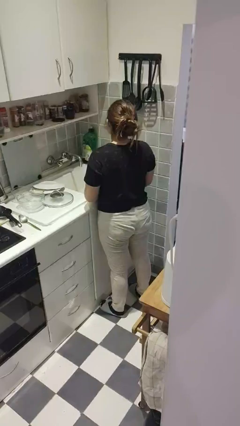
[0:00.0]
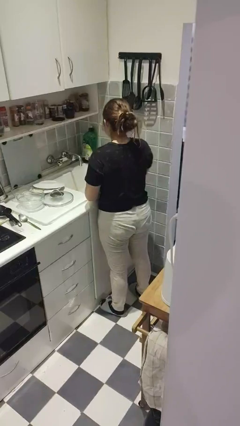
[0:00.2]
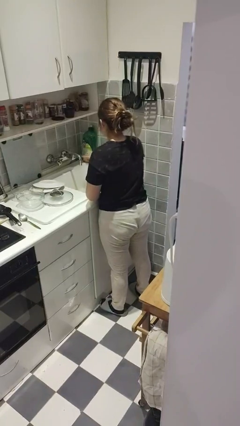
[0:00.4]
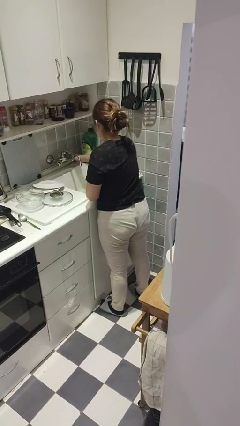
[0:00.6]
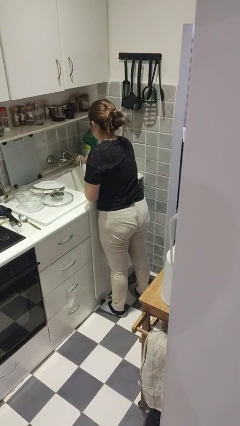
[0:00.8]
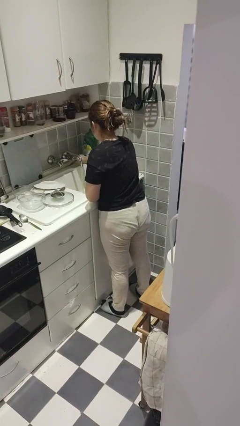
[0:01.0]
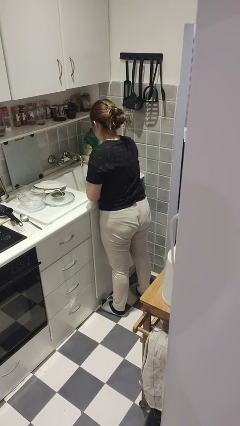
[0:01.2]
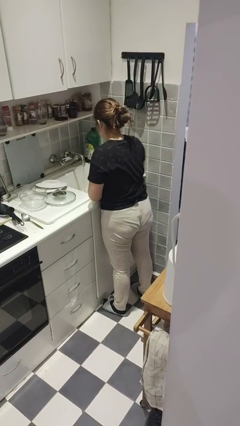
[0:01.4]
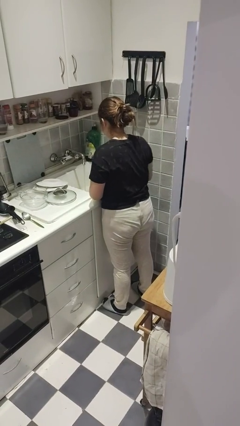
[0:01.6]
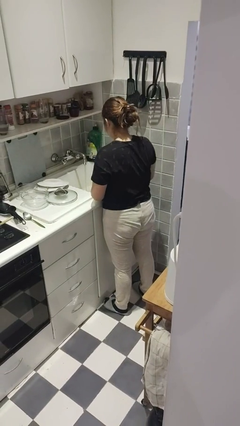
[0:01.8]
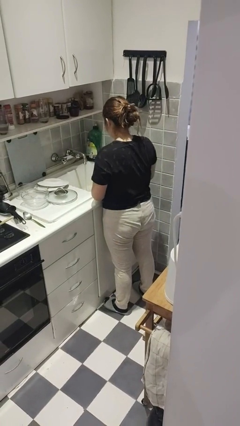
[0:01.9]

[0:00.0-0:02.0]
person turns on faucet

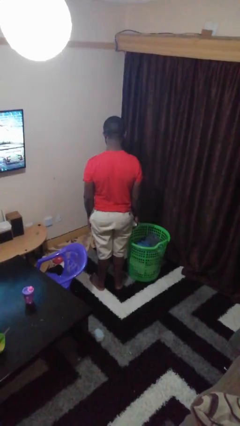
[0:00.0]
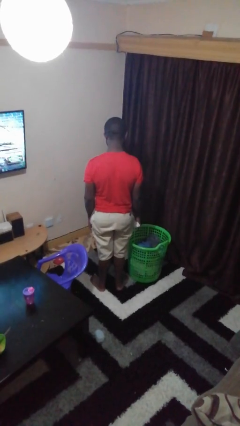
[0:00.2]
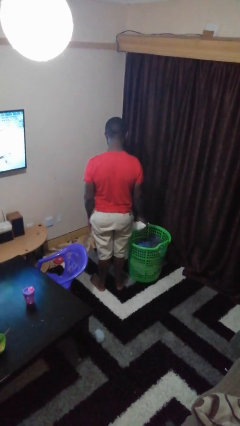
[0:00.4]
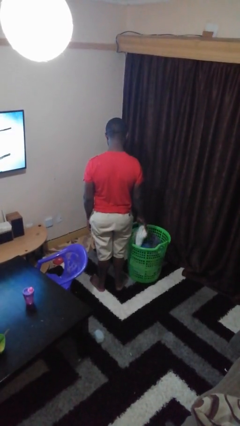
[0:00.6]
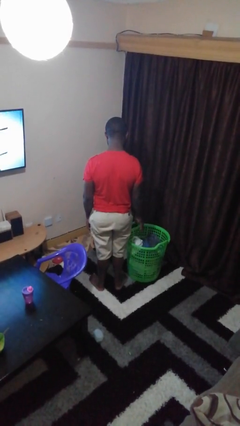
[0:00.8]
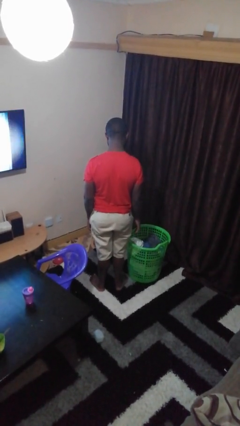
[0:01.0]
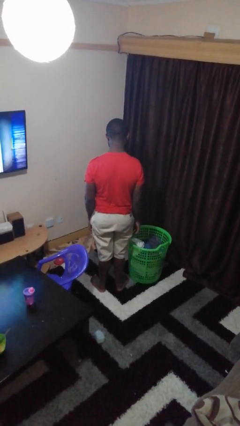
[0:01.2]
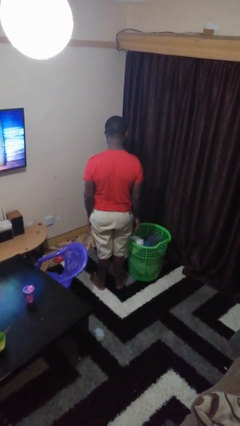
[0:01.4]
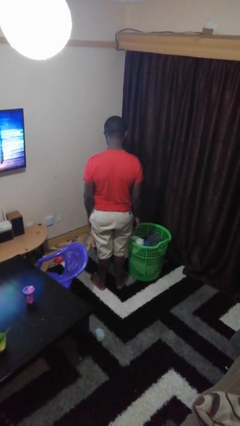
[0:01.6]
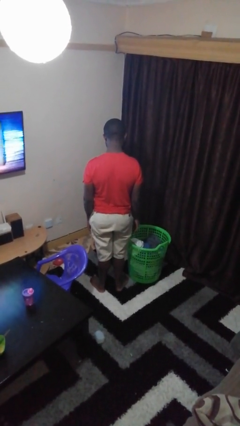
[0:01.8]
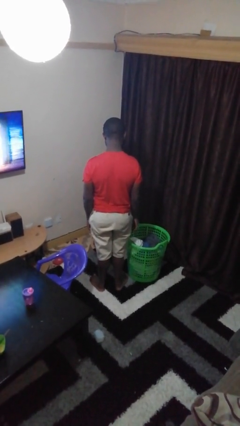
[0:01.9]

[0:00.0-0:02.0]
person puts object into basket

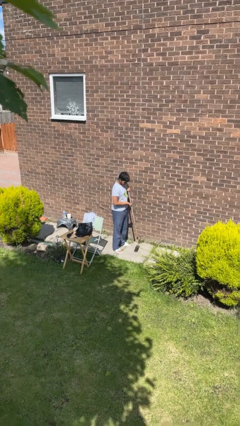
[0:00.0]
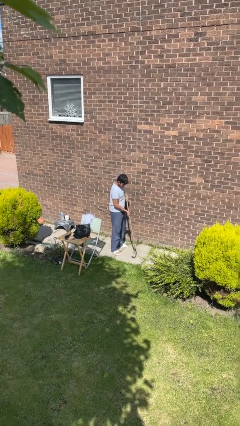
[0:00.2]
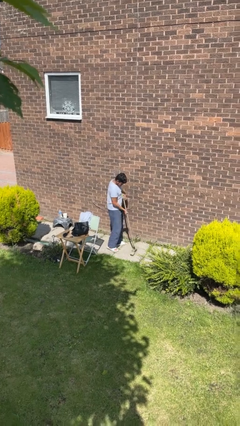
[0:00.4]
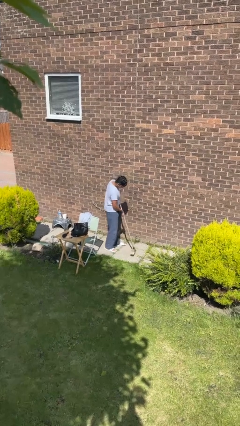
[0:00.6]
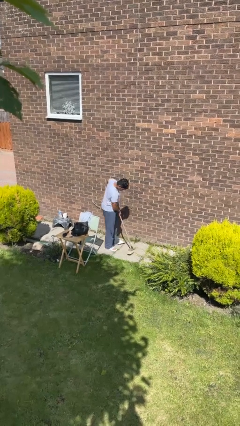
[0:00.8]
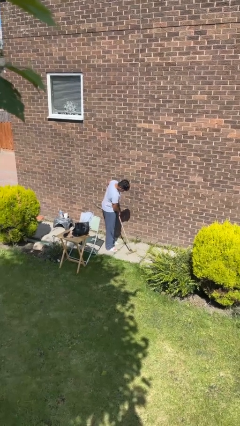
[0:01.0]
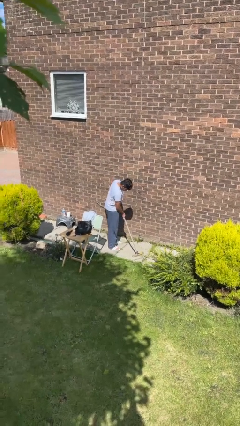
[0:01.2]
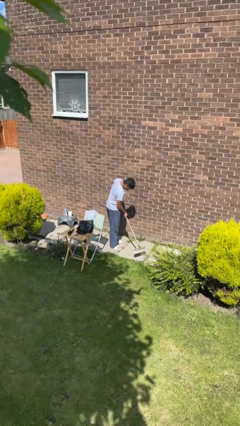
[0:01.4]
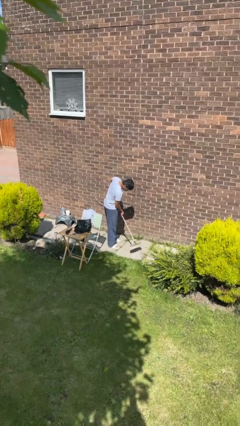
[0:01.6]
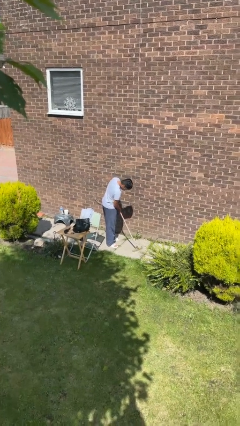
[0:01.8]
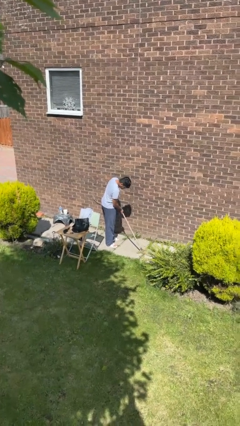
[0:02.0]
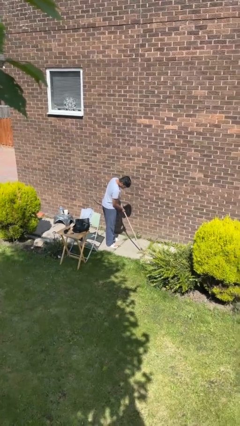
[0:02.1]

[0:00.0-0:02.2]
person sweeps floor

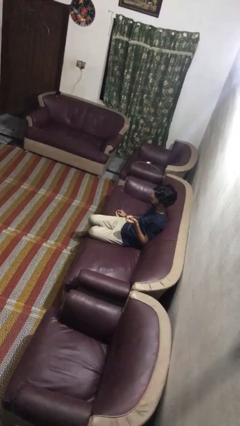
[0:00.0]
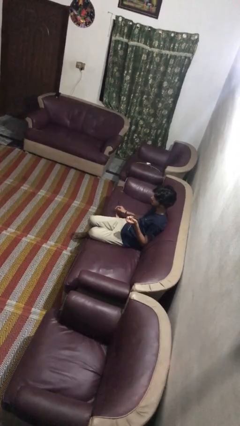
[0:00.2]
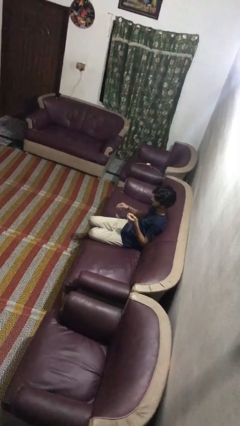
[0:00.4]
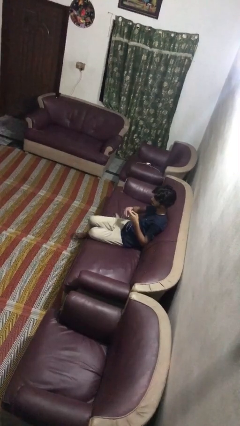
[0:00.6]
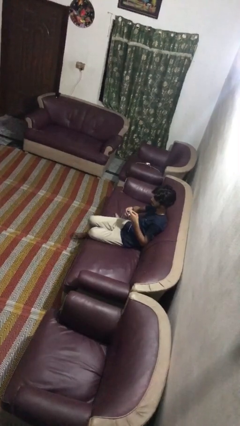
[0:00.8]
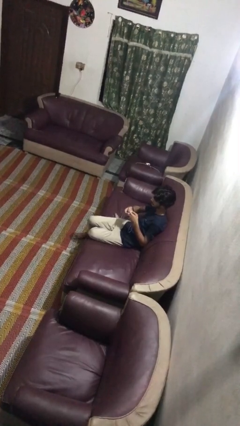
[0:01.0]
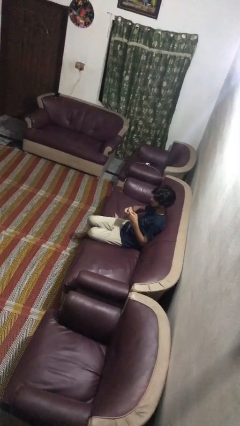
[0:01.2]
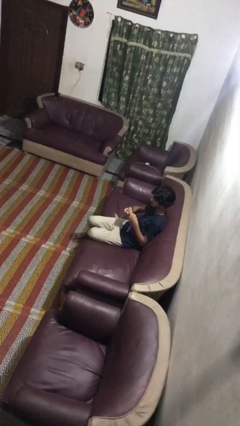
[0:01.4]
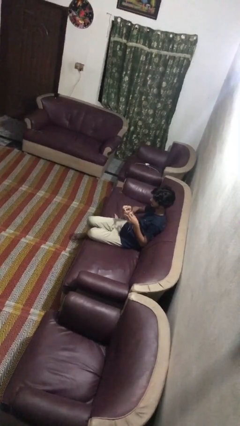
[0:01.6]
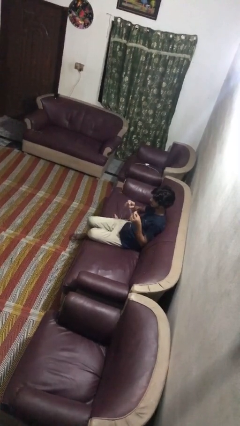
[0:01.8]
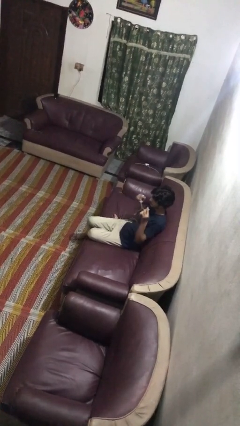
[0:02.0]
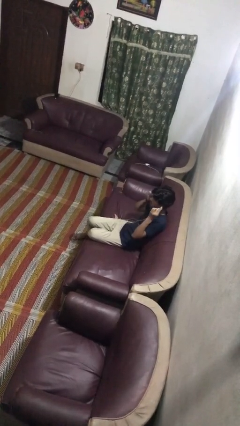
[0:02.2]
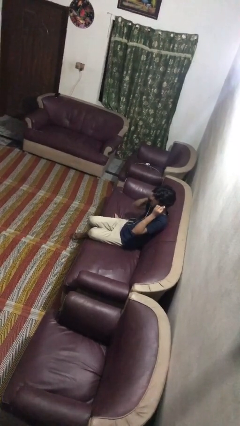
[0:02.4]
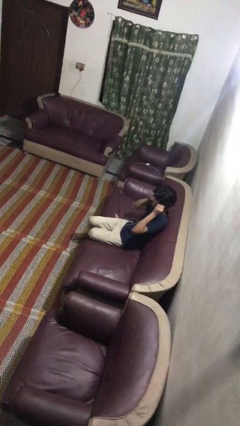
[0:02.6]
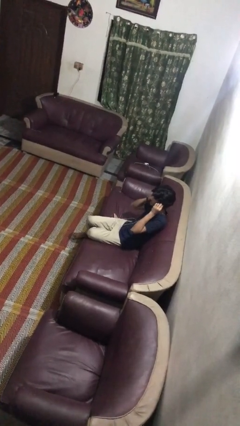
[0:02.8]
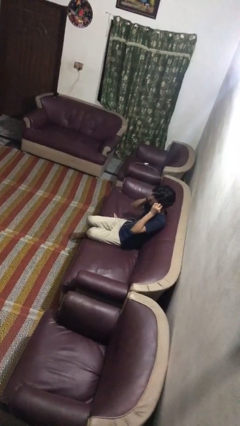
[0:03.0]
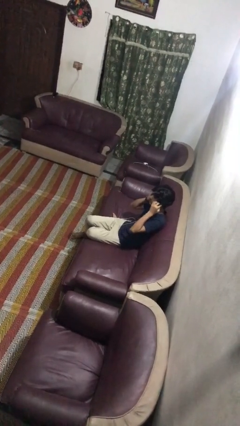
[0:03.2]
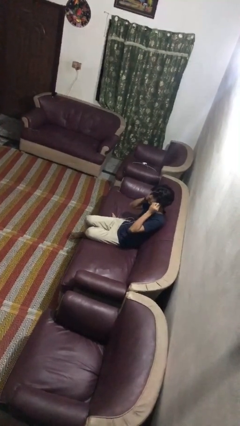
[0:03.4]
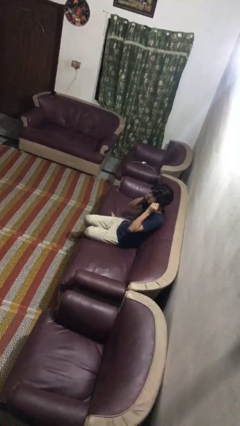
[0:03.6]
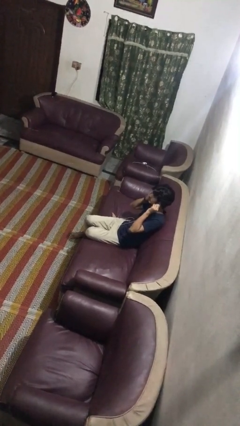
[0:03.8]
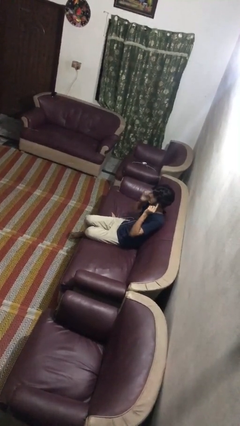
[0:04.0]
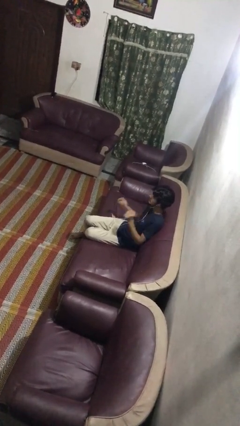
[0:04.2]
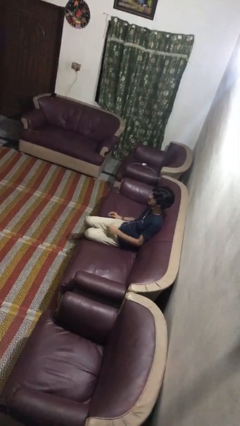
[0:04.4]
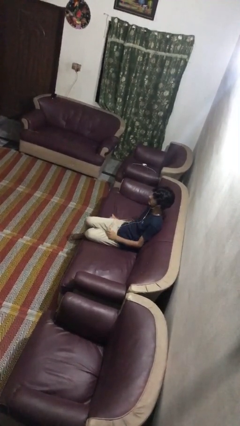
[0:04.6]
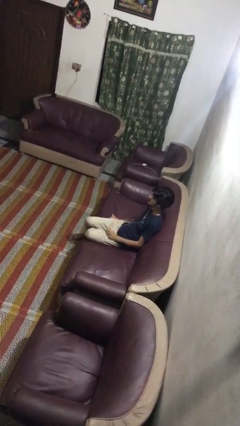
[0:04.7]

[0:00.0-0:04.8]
person puts on headphones

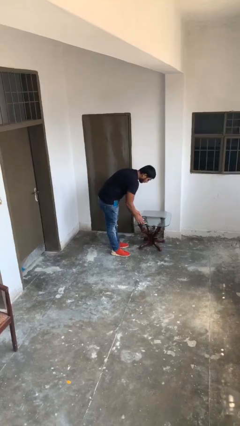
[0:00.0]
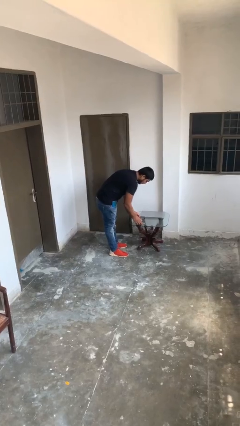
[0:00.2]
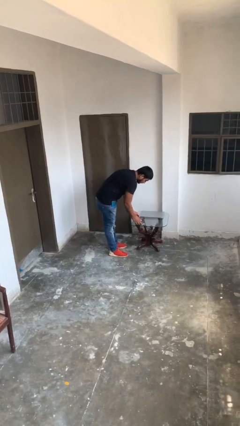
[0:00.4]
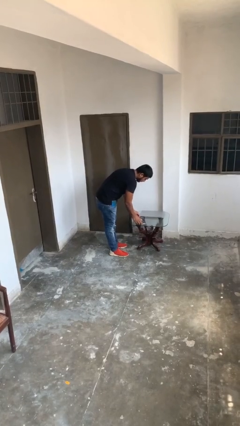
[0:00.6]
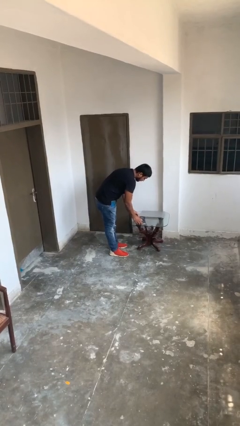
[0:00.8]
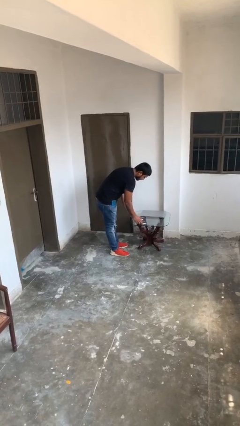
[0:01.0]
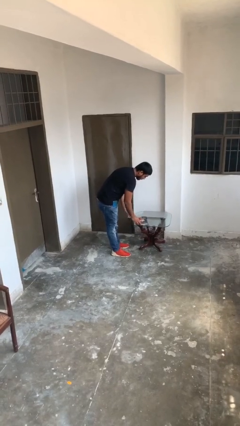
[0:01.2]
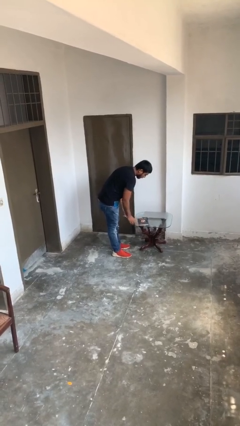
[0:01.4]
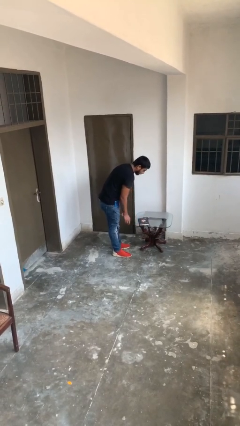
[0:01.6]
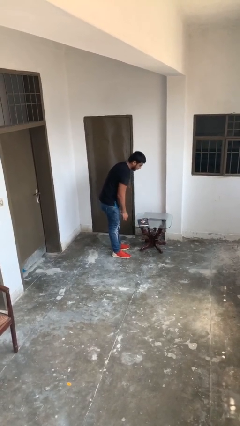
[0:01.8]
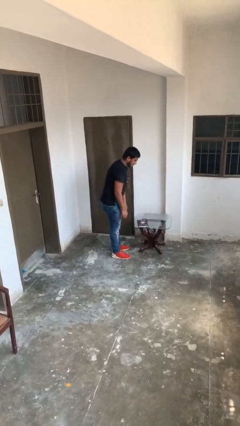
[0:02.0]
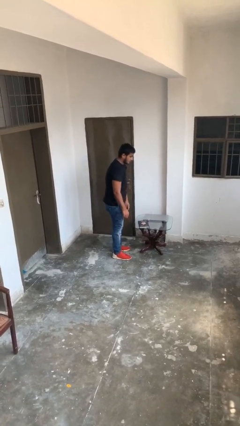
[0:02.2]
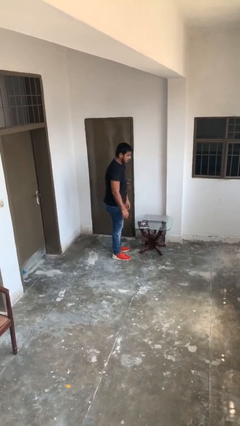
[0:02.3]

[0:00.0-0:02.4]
person puts down object on table

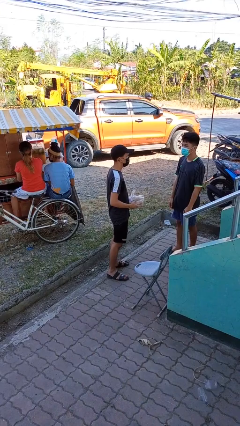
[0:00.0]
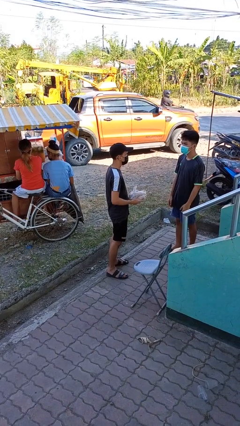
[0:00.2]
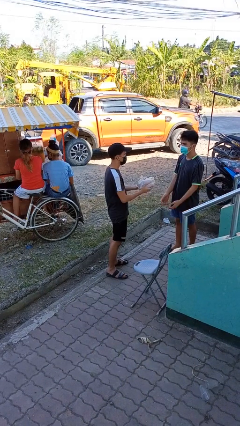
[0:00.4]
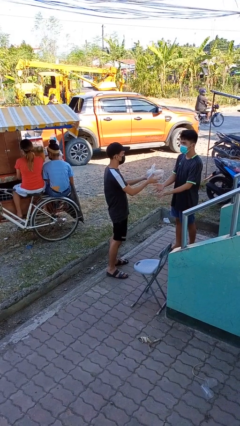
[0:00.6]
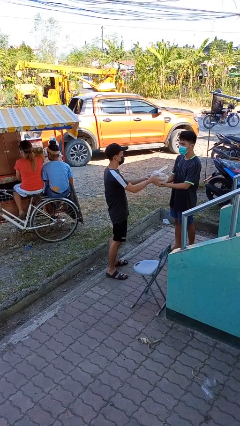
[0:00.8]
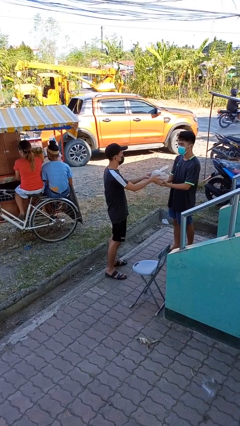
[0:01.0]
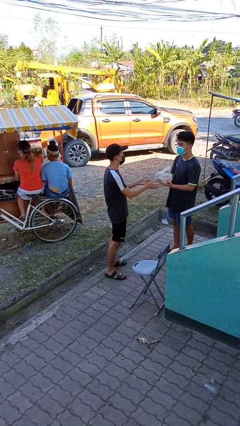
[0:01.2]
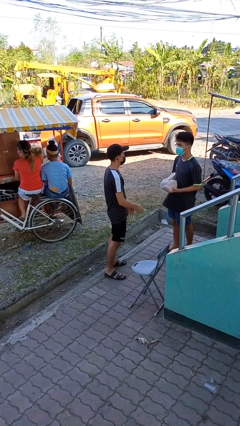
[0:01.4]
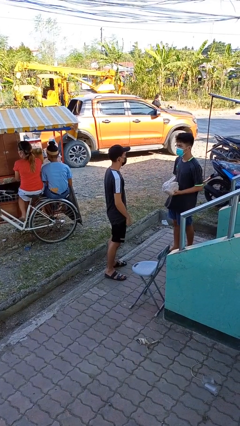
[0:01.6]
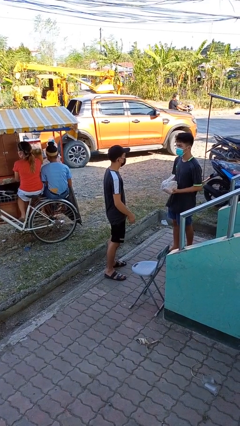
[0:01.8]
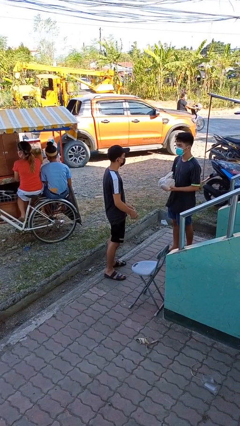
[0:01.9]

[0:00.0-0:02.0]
person transfers object to person

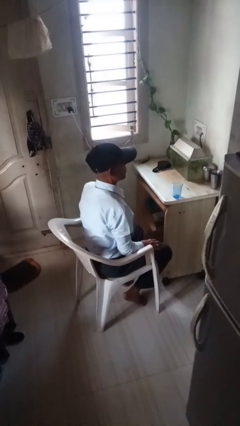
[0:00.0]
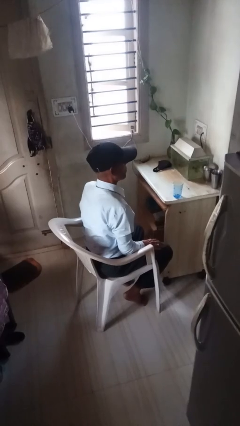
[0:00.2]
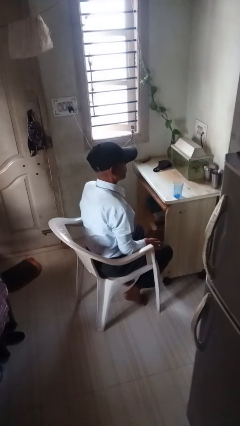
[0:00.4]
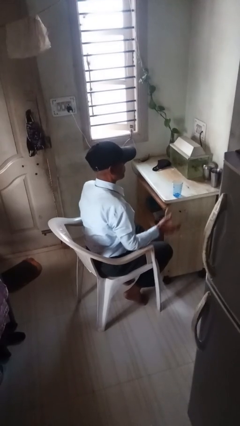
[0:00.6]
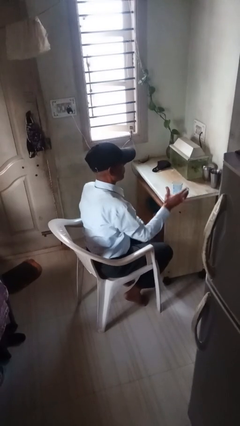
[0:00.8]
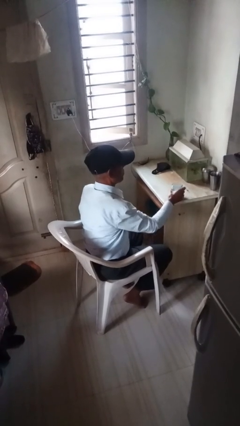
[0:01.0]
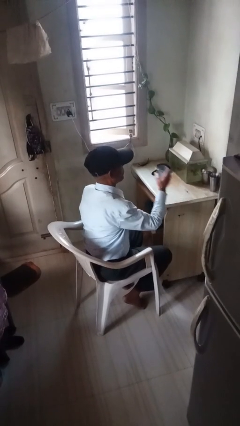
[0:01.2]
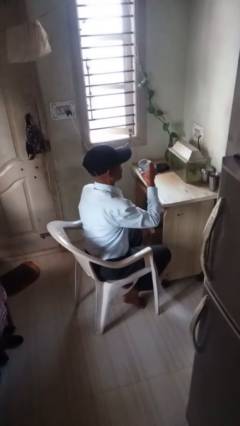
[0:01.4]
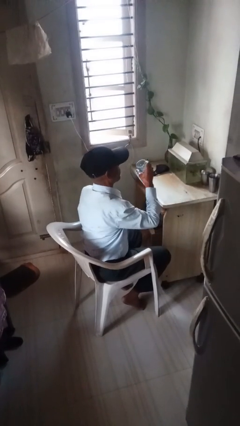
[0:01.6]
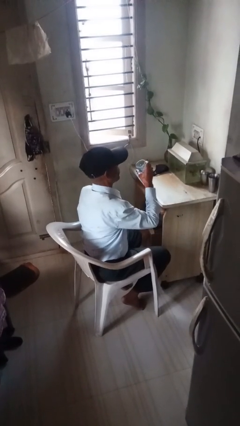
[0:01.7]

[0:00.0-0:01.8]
person picks up object from table

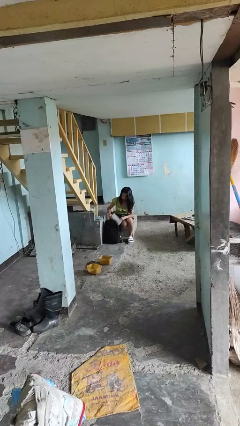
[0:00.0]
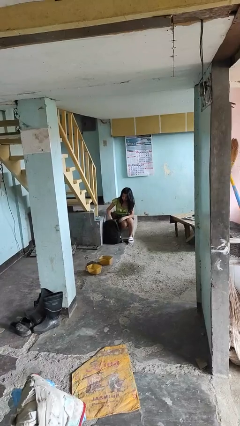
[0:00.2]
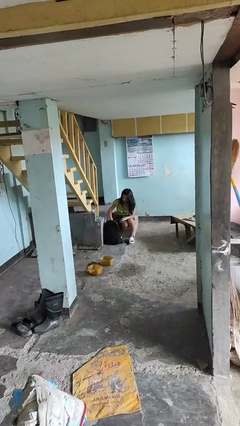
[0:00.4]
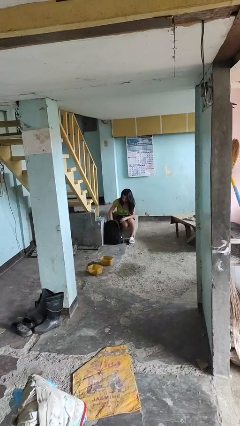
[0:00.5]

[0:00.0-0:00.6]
person puts object into backpack
